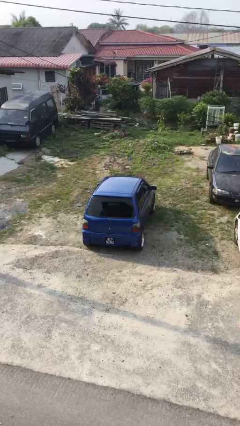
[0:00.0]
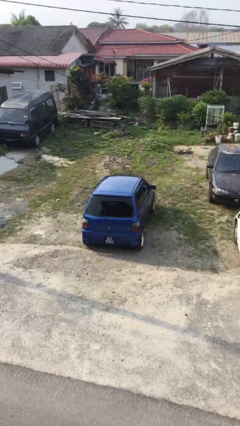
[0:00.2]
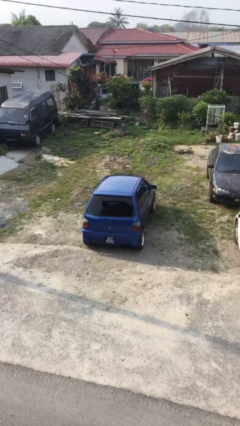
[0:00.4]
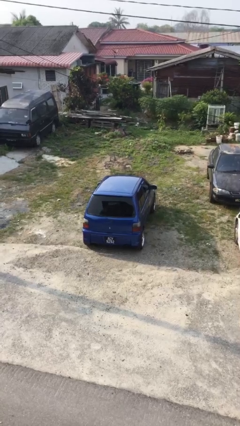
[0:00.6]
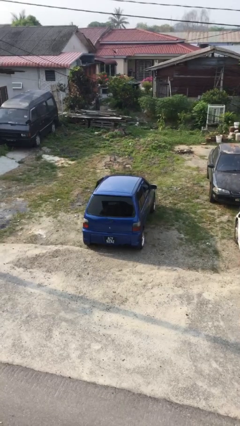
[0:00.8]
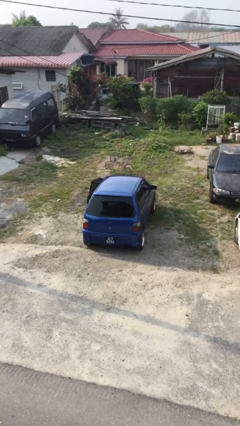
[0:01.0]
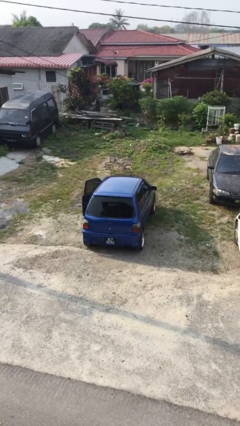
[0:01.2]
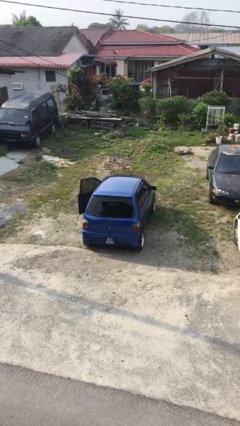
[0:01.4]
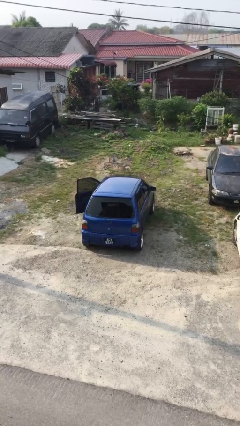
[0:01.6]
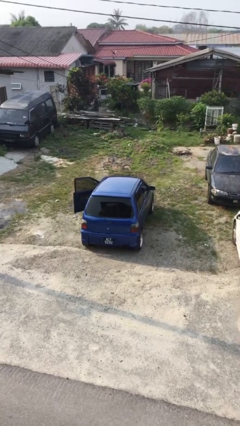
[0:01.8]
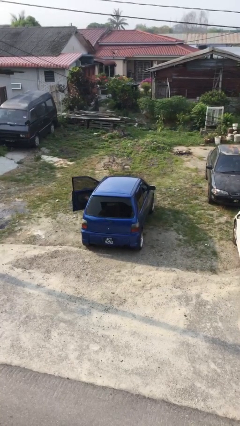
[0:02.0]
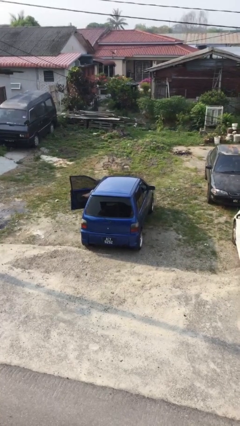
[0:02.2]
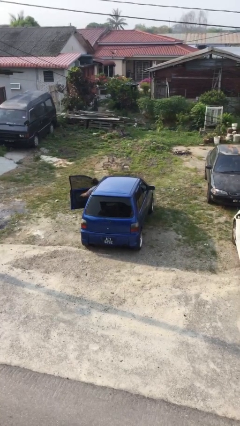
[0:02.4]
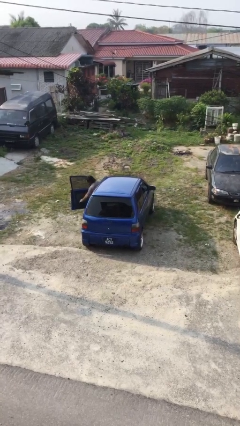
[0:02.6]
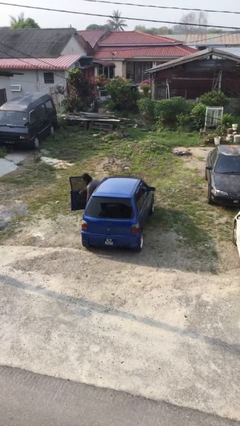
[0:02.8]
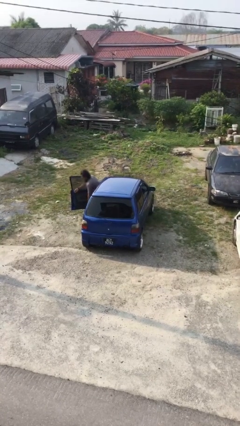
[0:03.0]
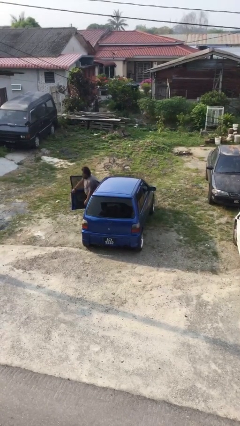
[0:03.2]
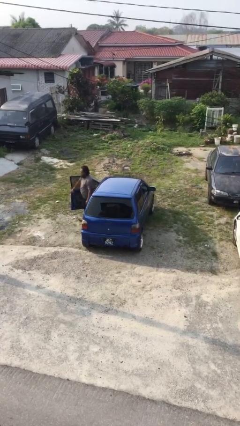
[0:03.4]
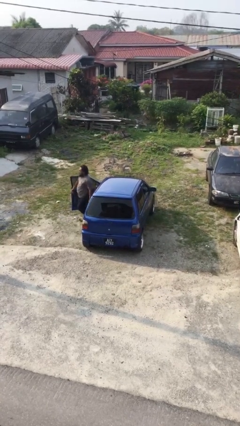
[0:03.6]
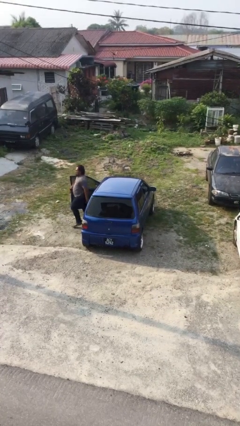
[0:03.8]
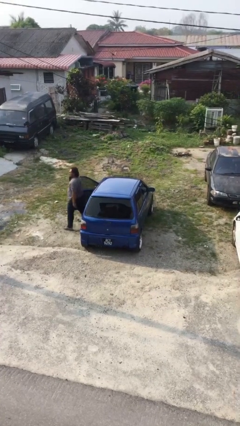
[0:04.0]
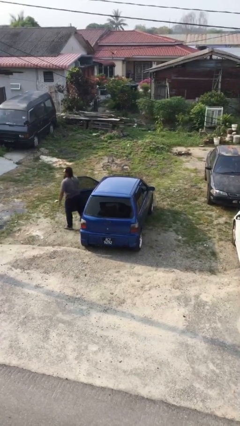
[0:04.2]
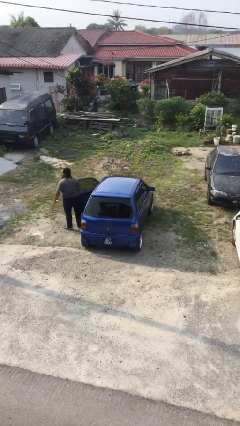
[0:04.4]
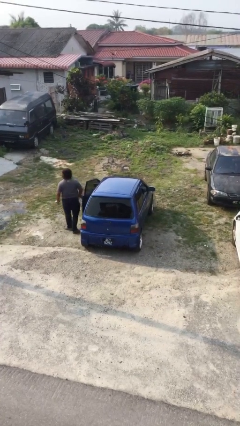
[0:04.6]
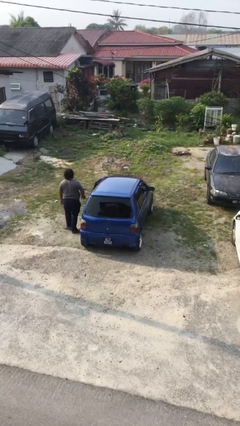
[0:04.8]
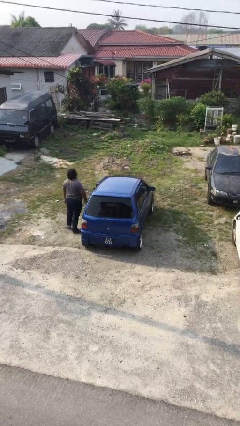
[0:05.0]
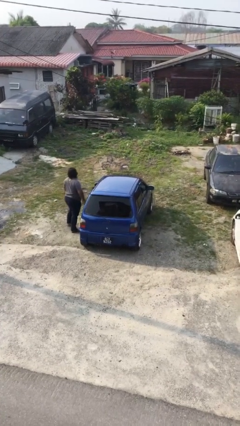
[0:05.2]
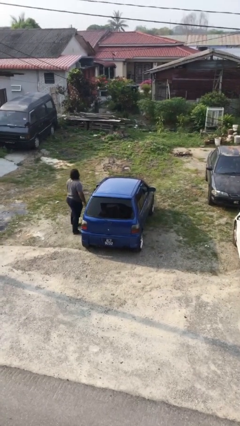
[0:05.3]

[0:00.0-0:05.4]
car drops off person

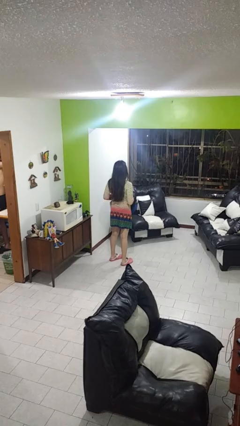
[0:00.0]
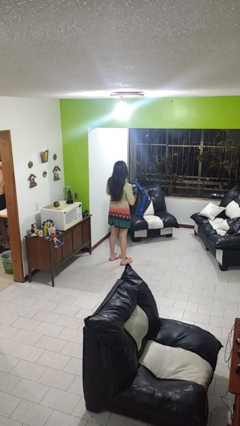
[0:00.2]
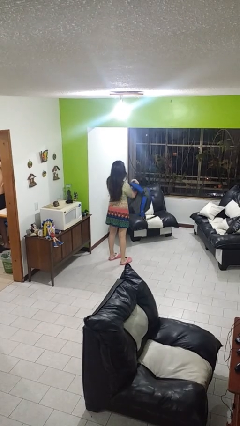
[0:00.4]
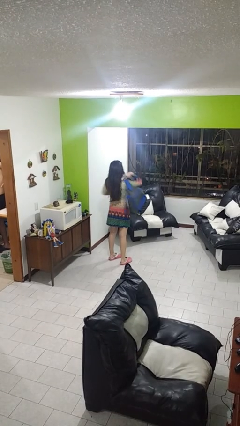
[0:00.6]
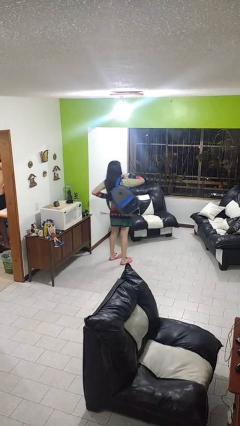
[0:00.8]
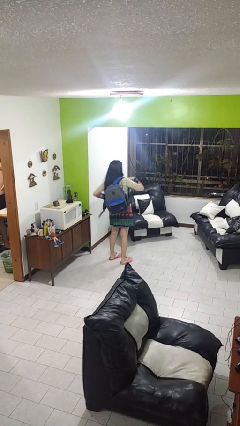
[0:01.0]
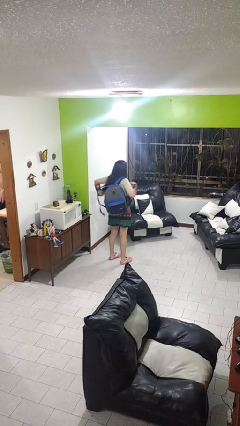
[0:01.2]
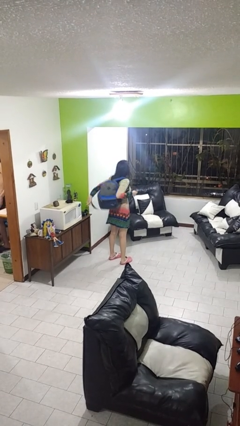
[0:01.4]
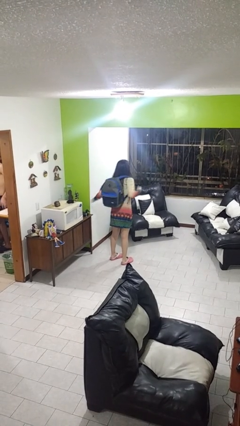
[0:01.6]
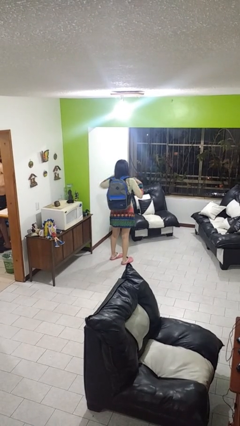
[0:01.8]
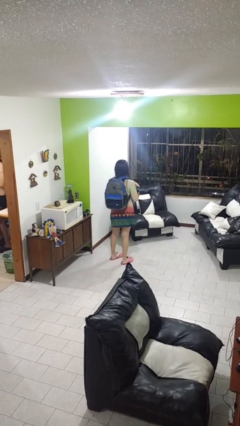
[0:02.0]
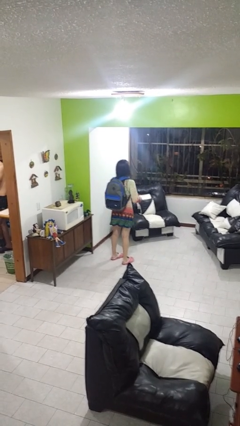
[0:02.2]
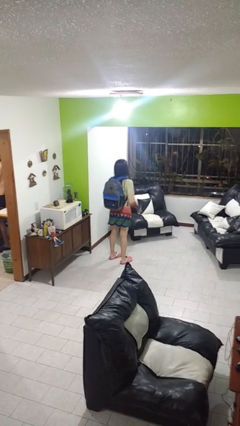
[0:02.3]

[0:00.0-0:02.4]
person puts on backpack

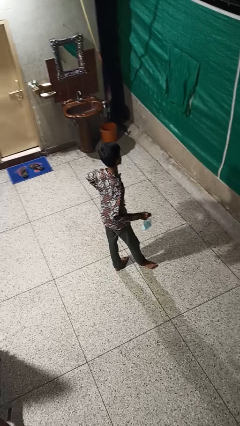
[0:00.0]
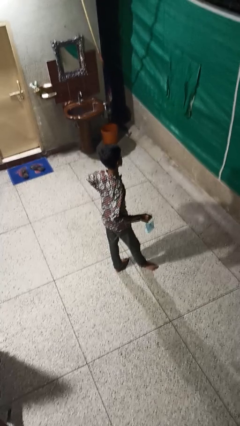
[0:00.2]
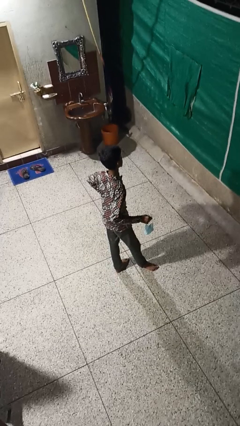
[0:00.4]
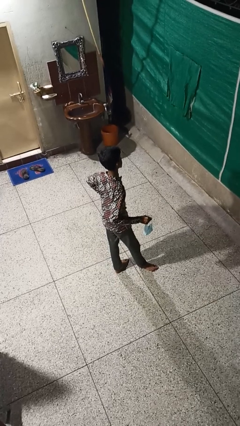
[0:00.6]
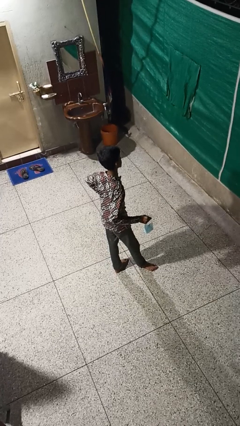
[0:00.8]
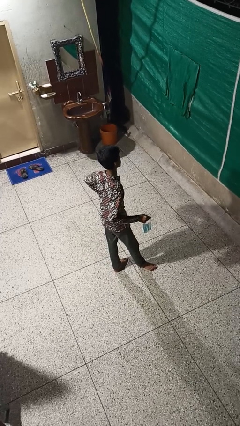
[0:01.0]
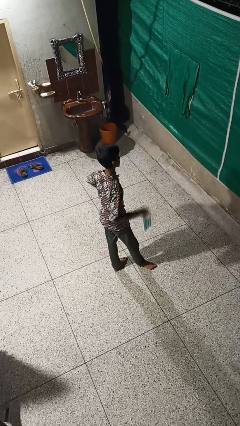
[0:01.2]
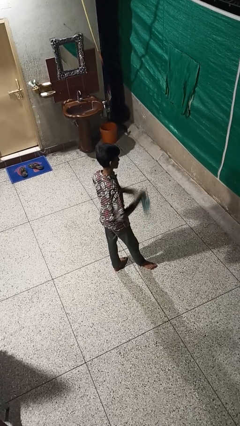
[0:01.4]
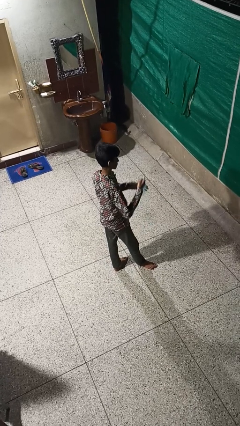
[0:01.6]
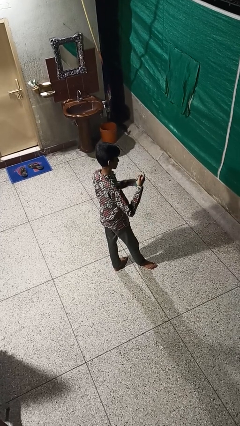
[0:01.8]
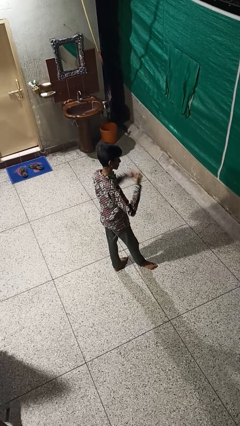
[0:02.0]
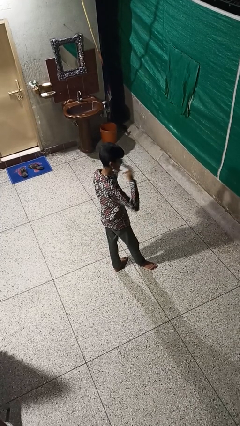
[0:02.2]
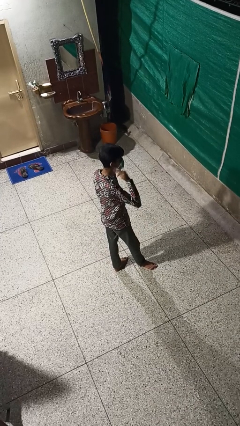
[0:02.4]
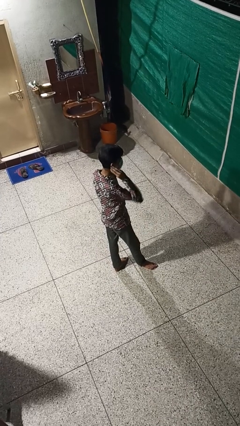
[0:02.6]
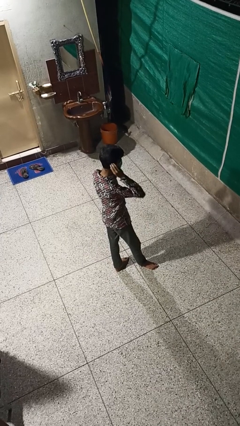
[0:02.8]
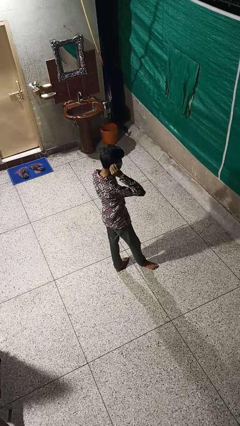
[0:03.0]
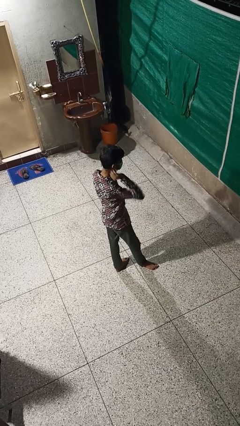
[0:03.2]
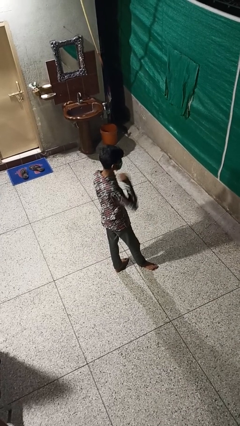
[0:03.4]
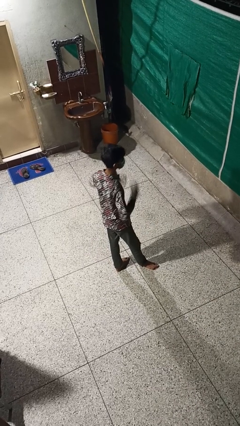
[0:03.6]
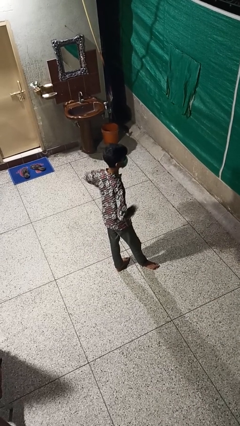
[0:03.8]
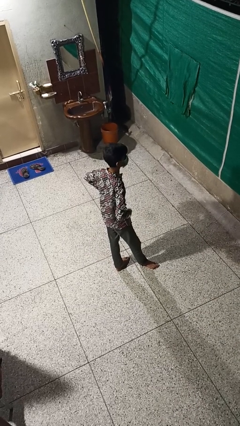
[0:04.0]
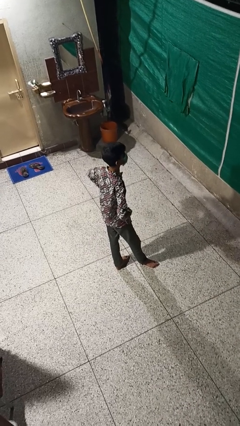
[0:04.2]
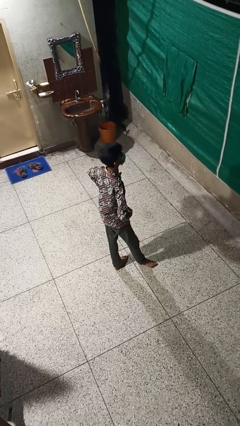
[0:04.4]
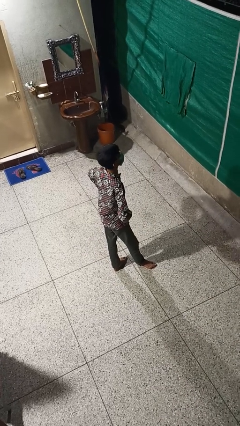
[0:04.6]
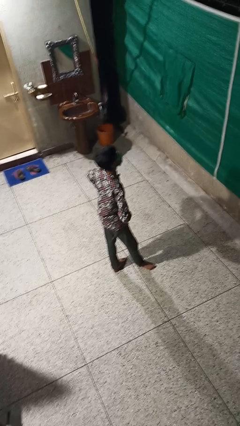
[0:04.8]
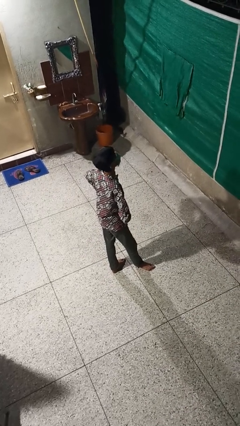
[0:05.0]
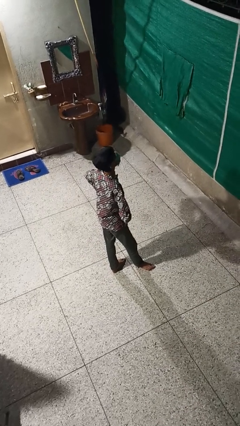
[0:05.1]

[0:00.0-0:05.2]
person puts on facemask

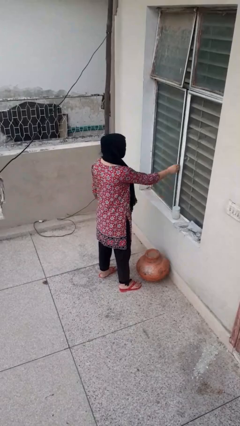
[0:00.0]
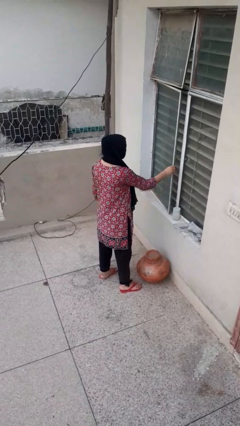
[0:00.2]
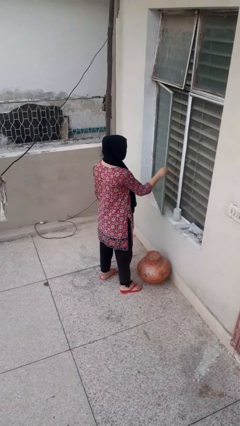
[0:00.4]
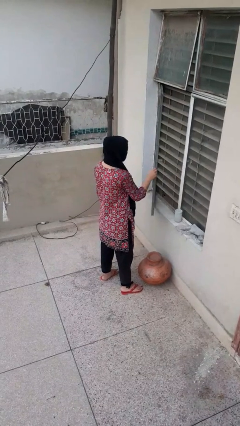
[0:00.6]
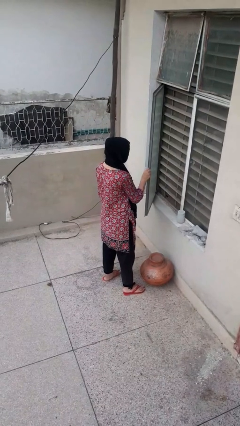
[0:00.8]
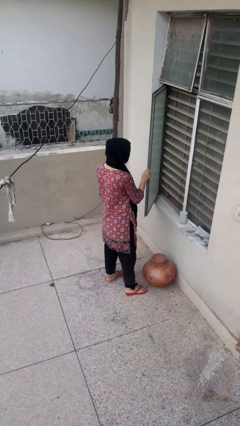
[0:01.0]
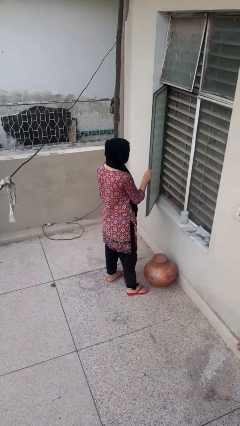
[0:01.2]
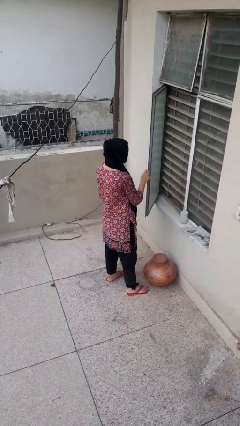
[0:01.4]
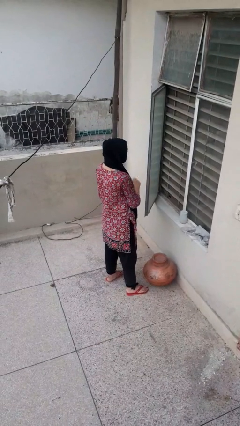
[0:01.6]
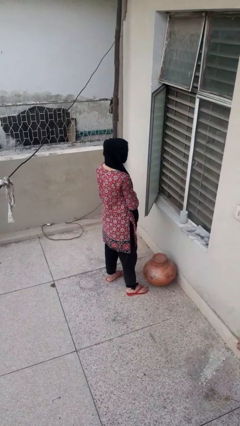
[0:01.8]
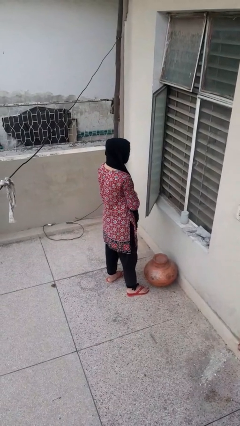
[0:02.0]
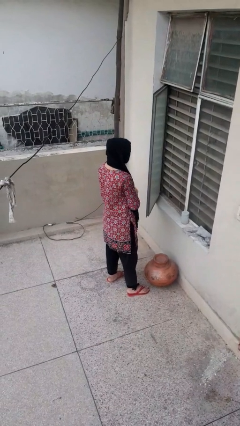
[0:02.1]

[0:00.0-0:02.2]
person opens home window

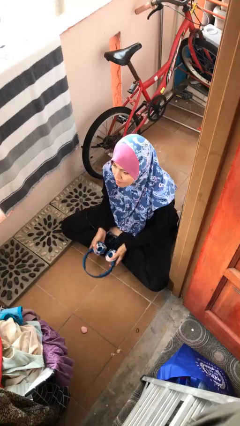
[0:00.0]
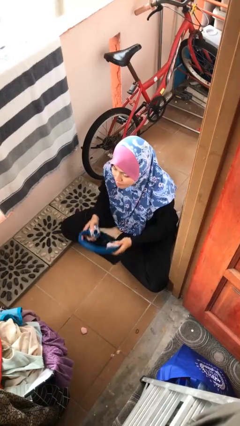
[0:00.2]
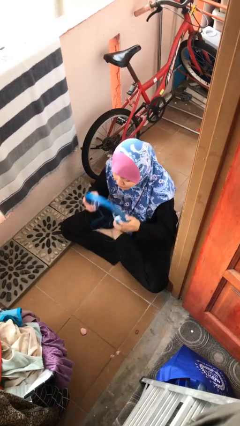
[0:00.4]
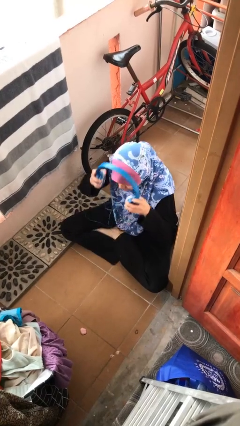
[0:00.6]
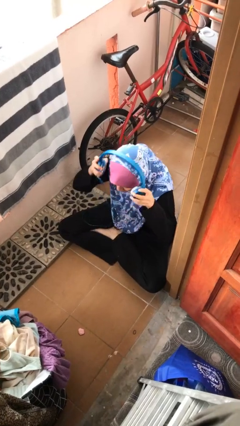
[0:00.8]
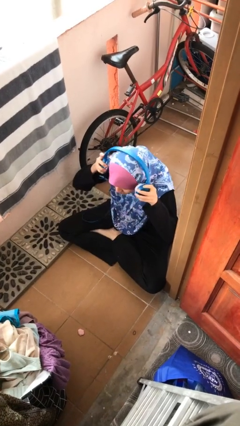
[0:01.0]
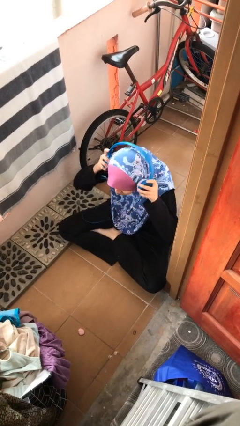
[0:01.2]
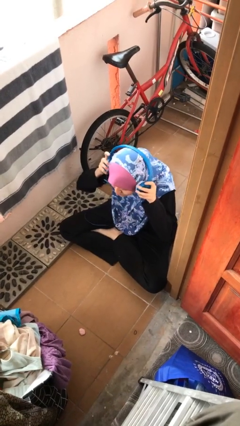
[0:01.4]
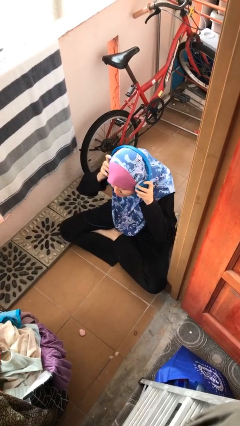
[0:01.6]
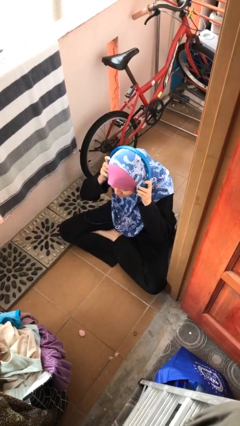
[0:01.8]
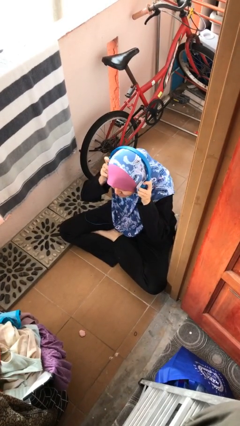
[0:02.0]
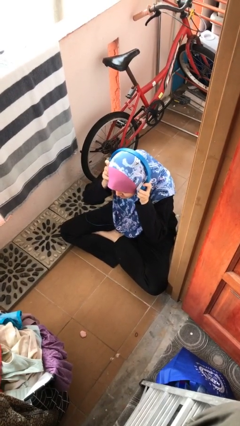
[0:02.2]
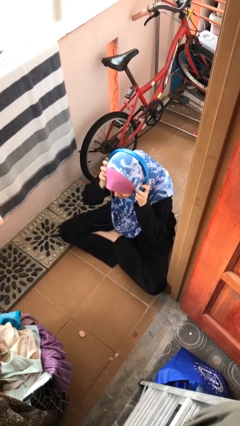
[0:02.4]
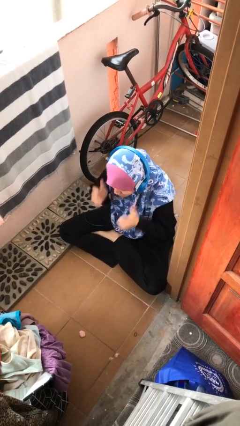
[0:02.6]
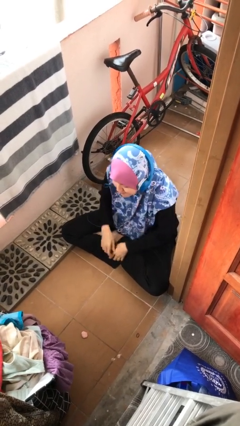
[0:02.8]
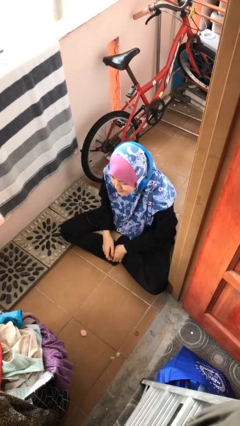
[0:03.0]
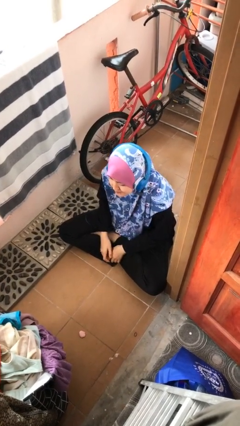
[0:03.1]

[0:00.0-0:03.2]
person puts on headphones
